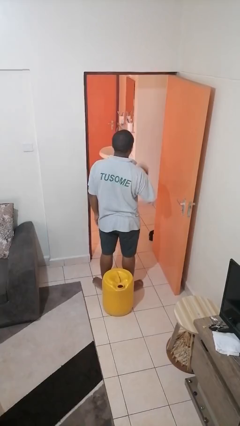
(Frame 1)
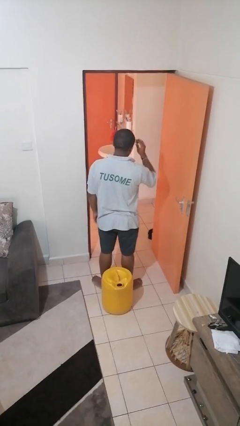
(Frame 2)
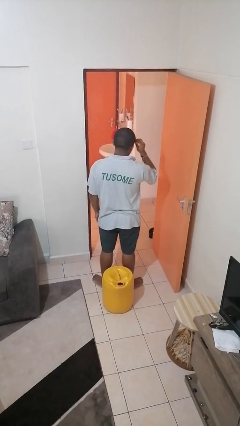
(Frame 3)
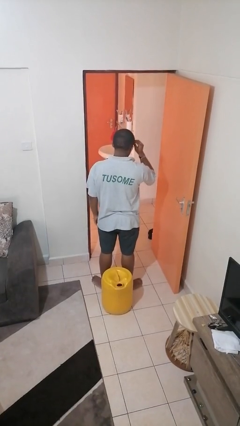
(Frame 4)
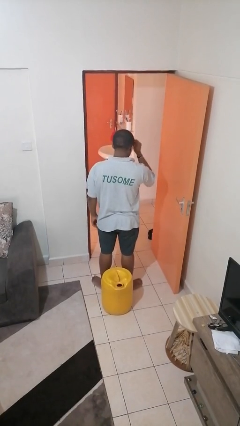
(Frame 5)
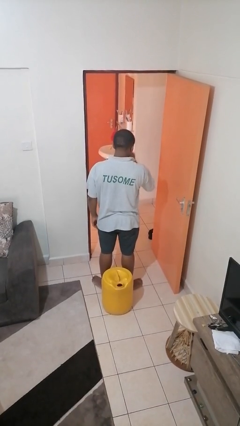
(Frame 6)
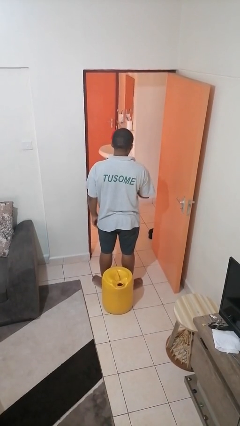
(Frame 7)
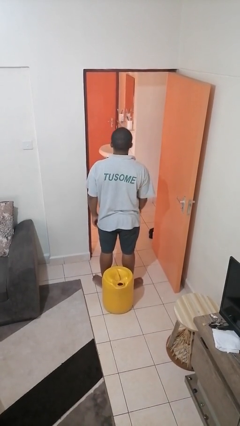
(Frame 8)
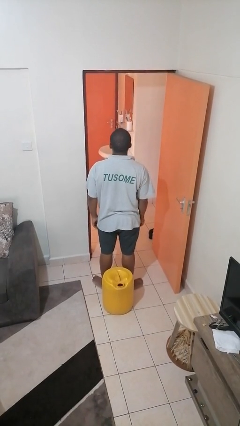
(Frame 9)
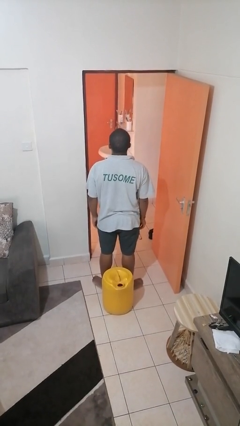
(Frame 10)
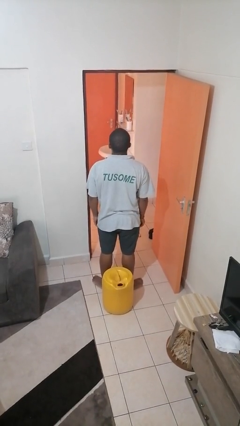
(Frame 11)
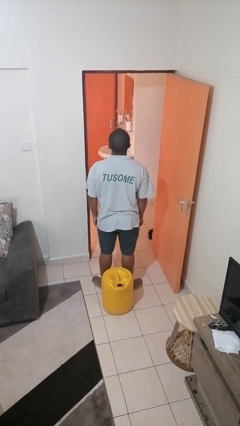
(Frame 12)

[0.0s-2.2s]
person takes off glasses

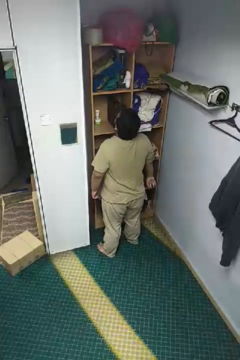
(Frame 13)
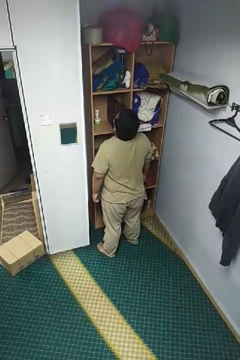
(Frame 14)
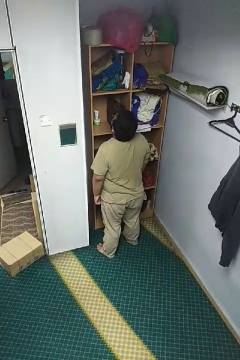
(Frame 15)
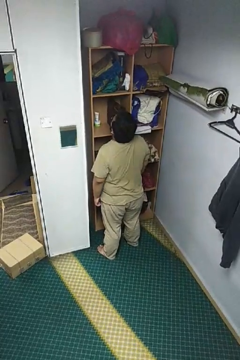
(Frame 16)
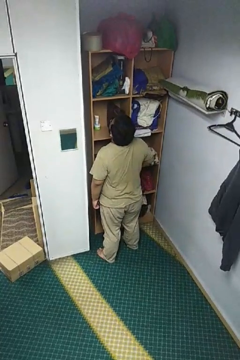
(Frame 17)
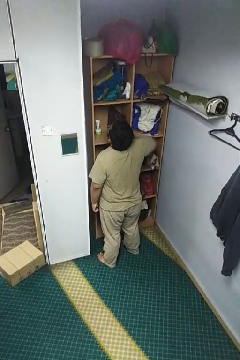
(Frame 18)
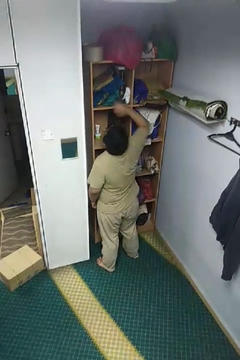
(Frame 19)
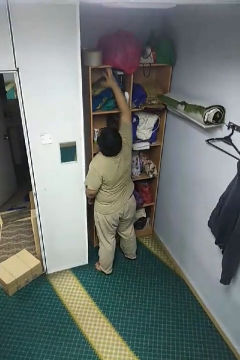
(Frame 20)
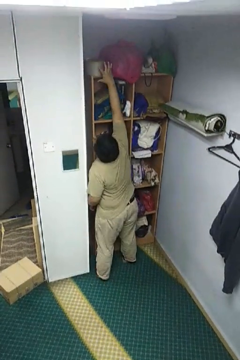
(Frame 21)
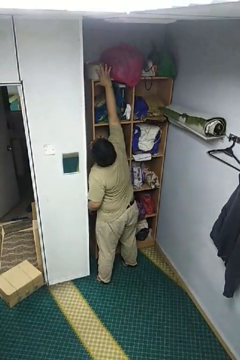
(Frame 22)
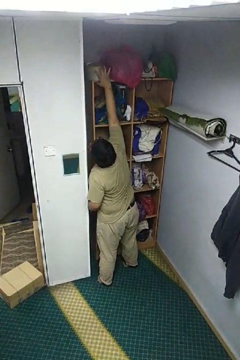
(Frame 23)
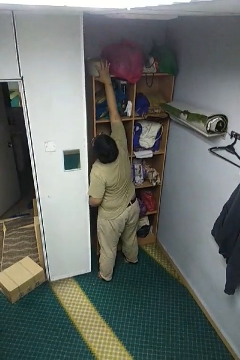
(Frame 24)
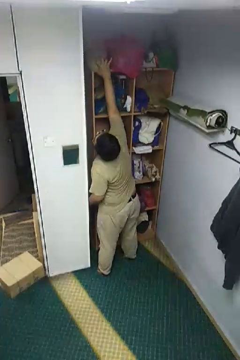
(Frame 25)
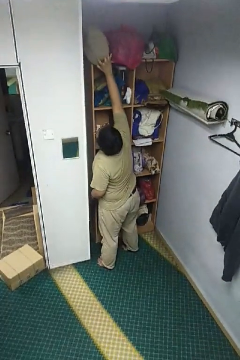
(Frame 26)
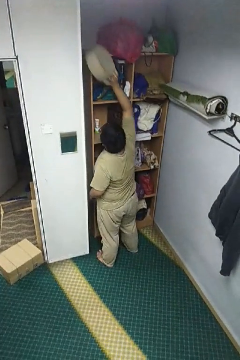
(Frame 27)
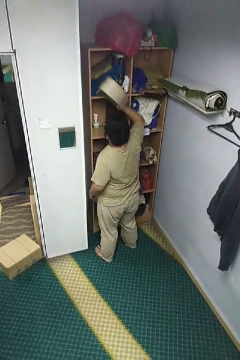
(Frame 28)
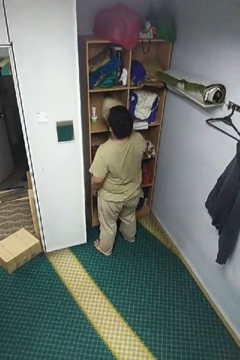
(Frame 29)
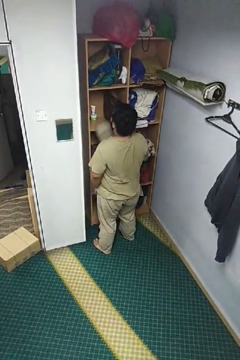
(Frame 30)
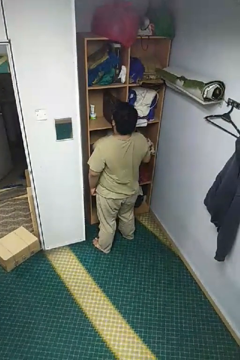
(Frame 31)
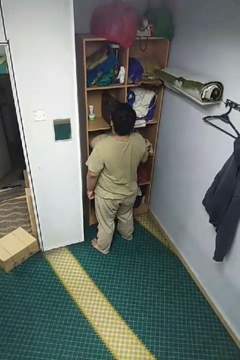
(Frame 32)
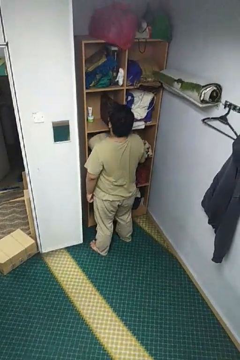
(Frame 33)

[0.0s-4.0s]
person picks up object from shelf

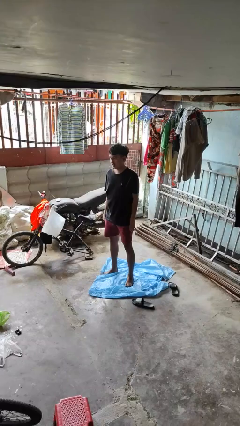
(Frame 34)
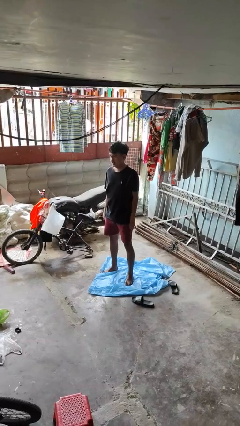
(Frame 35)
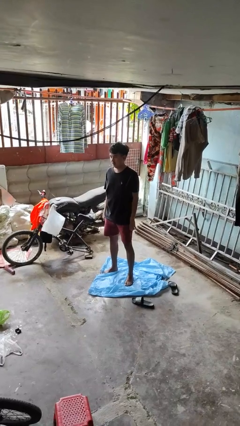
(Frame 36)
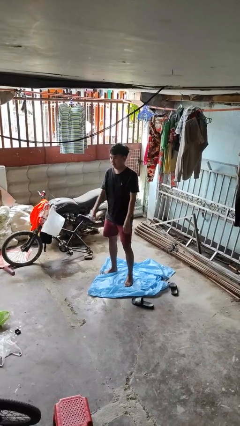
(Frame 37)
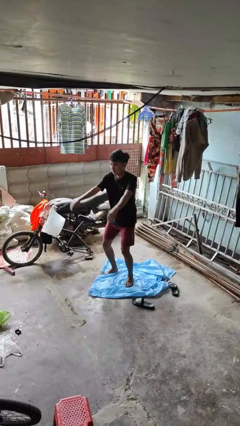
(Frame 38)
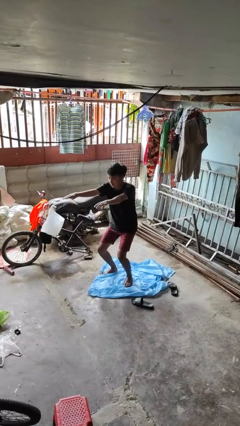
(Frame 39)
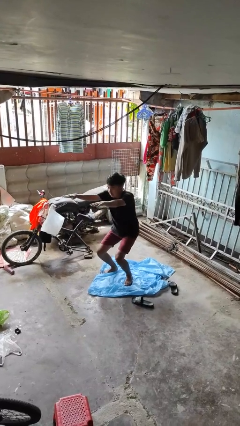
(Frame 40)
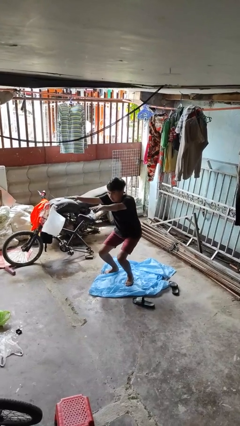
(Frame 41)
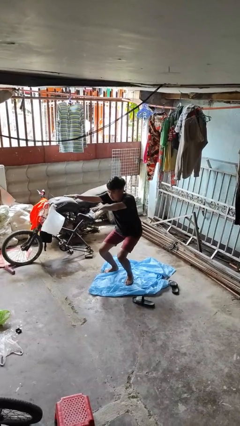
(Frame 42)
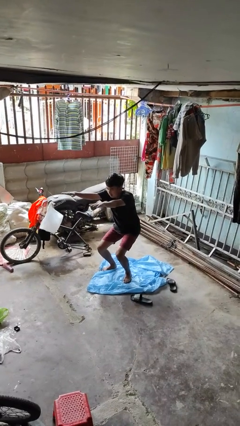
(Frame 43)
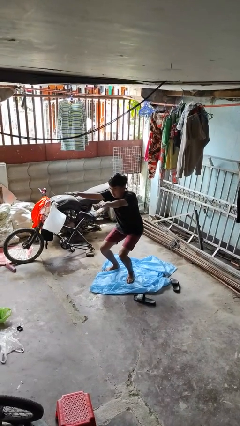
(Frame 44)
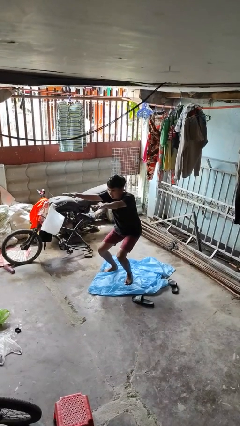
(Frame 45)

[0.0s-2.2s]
person squats

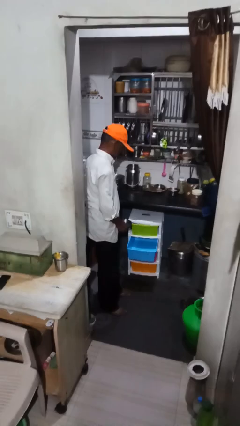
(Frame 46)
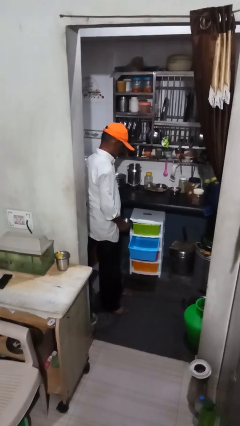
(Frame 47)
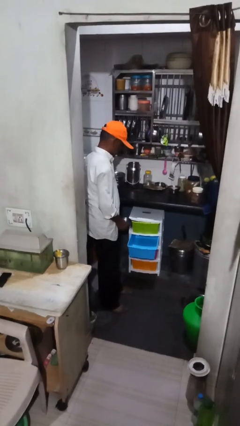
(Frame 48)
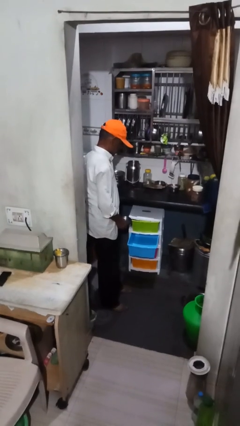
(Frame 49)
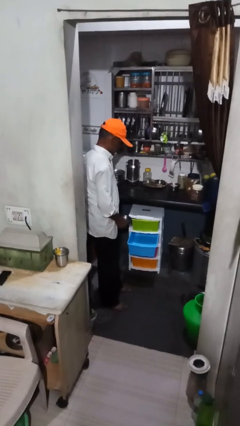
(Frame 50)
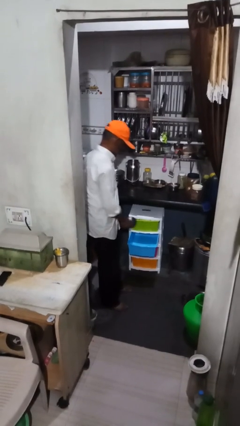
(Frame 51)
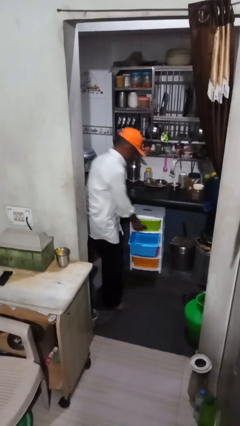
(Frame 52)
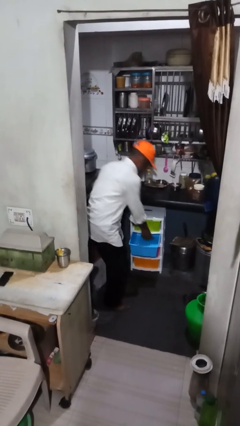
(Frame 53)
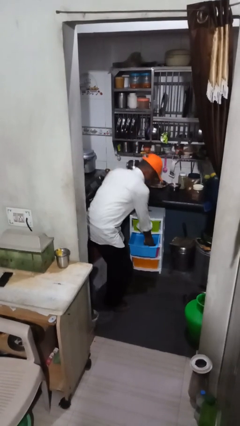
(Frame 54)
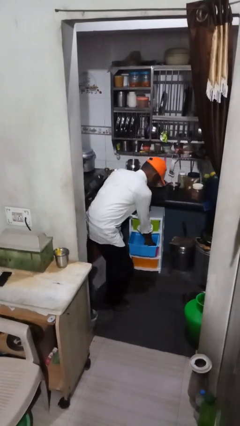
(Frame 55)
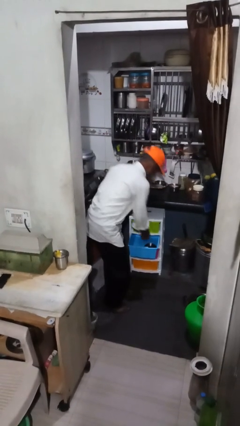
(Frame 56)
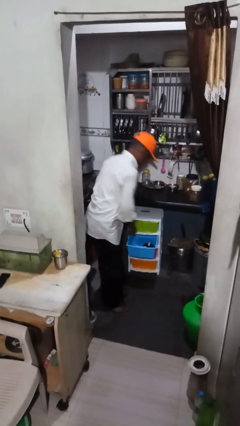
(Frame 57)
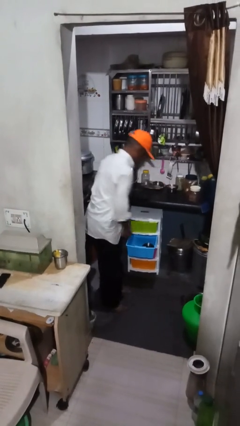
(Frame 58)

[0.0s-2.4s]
person puts object in cabinet

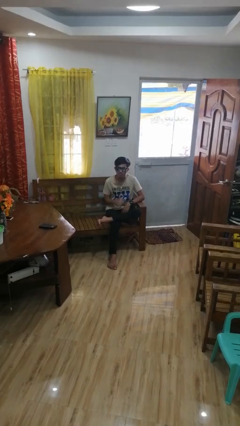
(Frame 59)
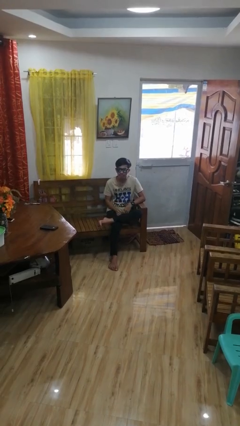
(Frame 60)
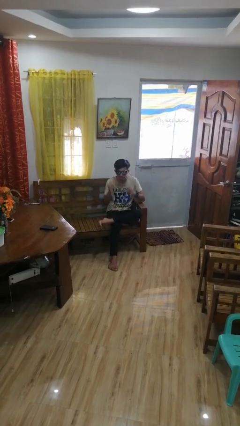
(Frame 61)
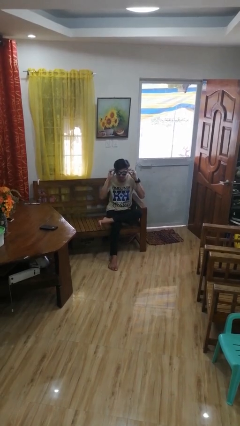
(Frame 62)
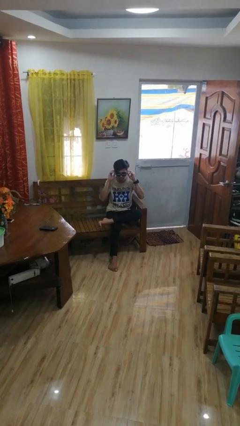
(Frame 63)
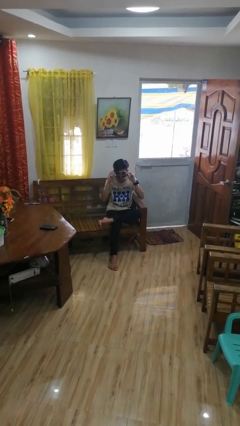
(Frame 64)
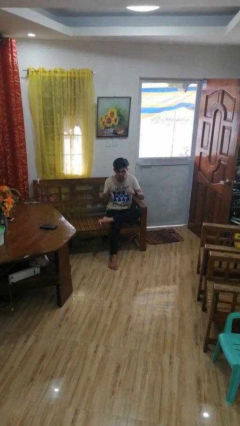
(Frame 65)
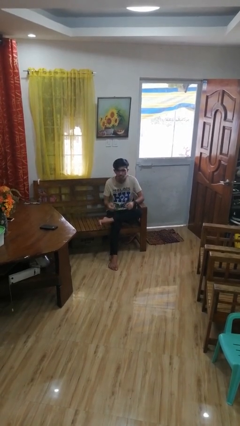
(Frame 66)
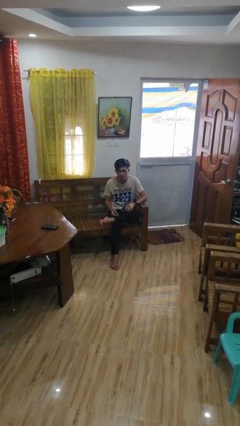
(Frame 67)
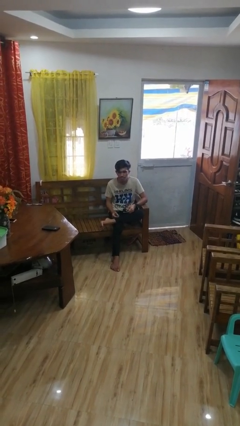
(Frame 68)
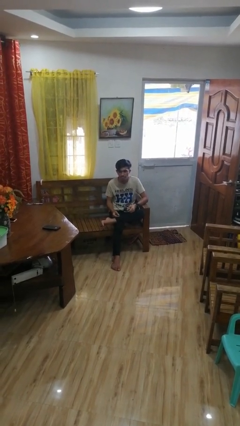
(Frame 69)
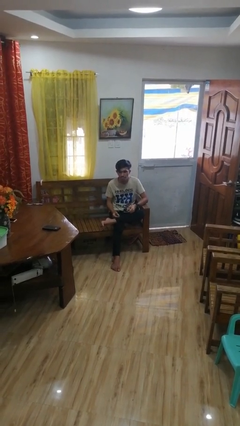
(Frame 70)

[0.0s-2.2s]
person takes off sunglasses

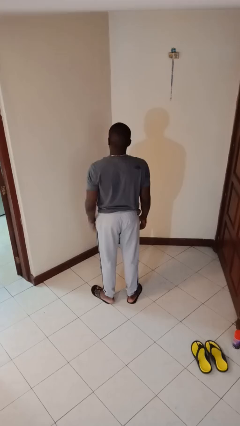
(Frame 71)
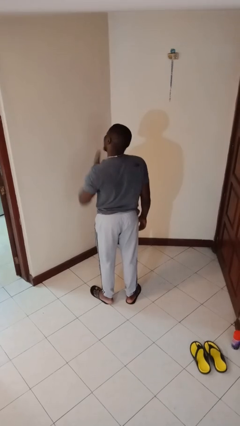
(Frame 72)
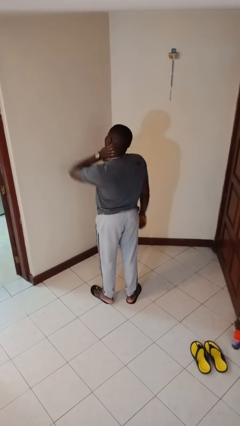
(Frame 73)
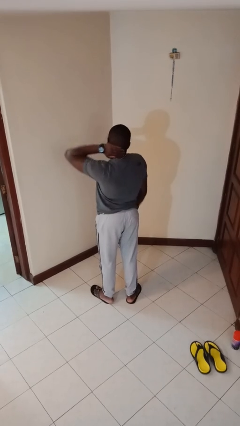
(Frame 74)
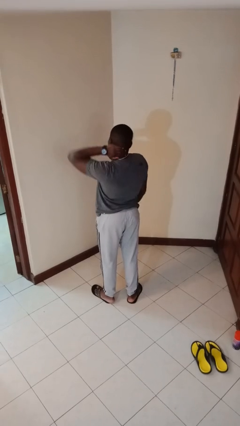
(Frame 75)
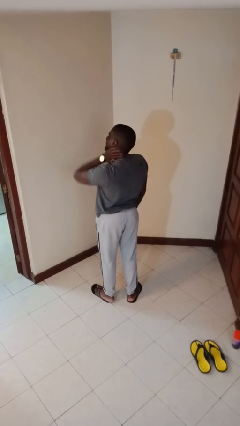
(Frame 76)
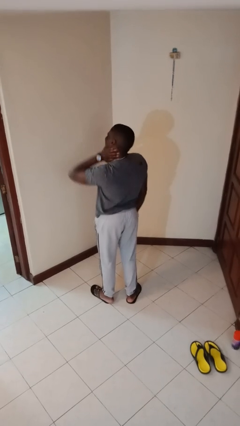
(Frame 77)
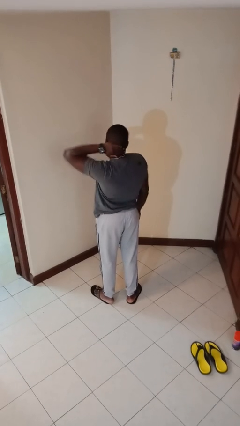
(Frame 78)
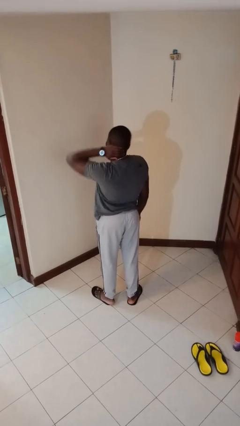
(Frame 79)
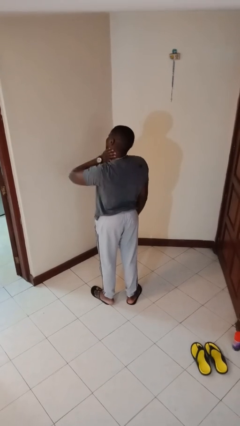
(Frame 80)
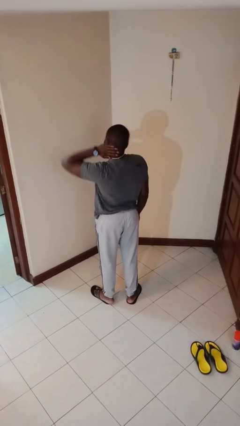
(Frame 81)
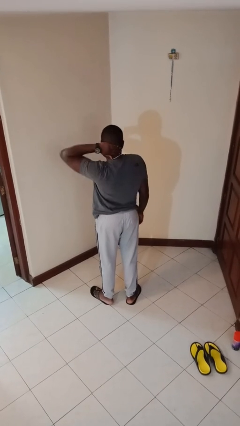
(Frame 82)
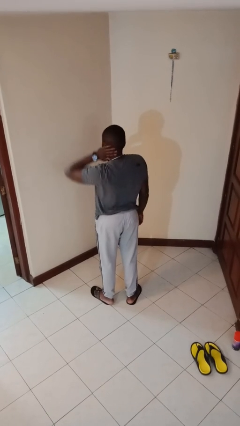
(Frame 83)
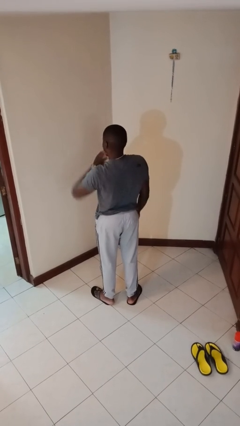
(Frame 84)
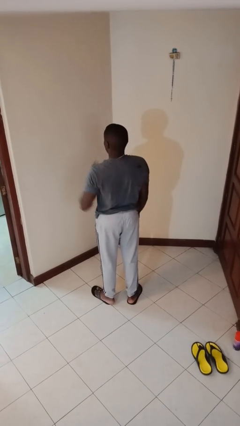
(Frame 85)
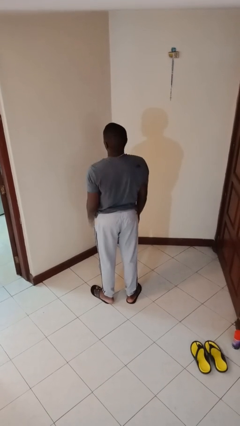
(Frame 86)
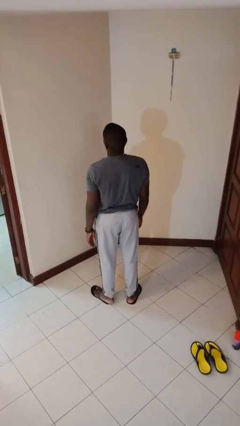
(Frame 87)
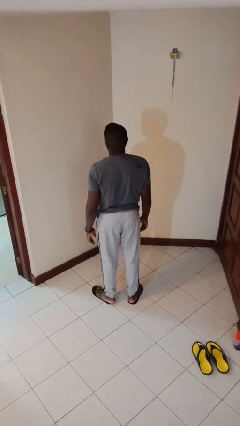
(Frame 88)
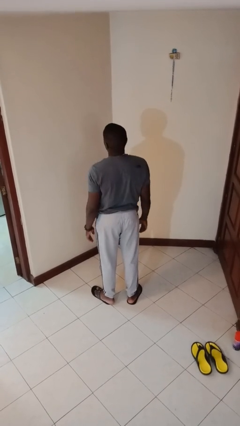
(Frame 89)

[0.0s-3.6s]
person rubs neck

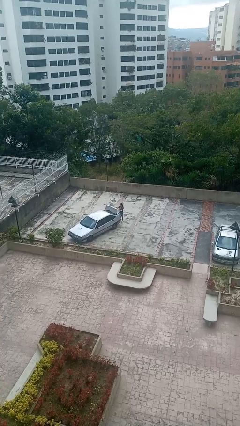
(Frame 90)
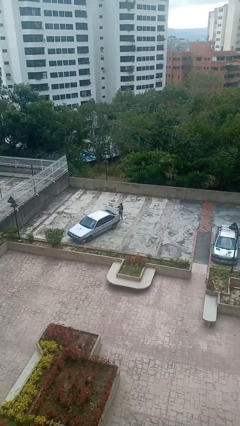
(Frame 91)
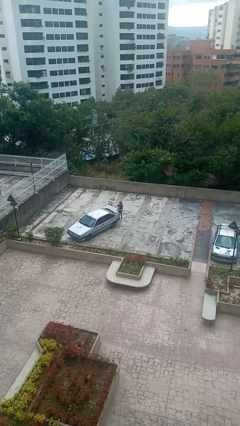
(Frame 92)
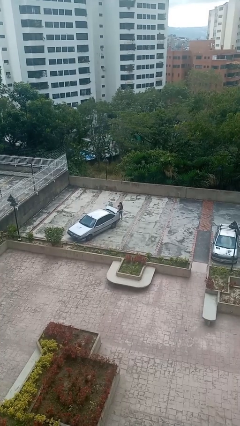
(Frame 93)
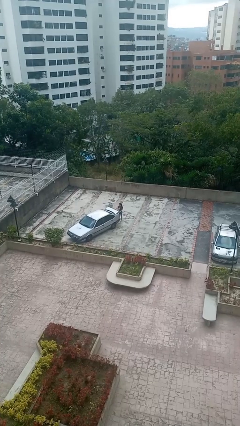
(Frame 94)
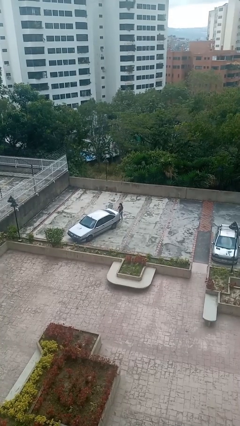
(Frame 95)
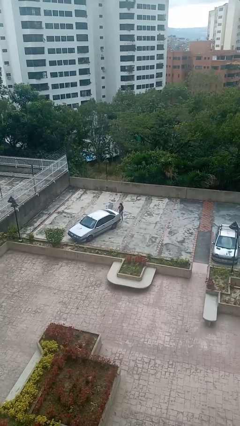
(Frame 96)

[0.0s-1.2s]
person closes car trunk
